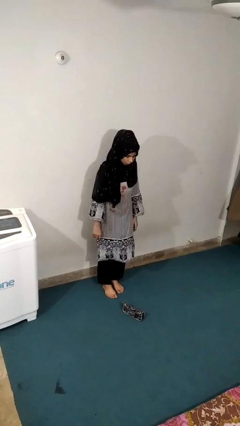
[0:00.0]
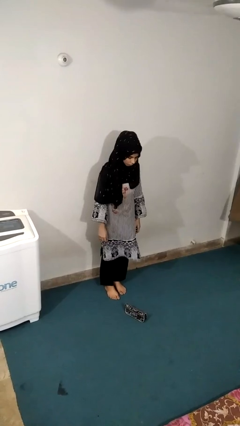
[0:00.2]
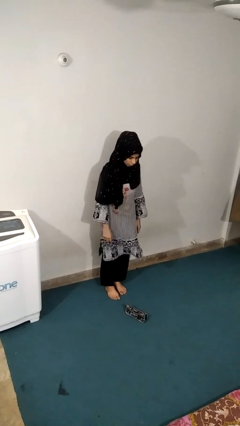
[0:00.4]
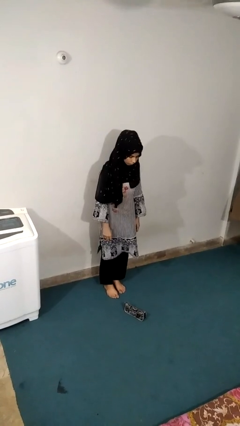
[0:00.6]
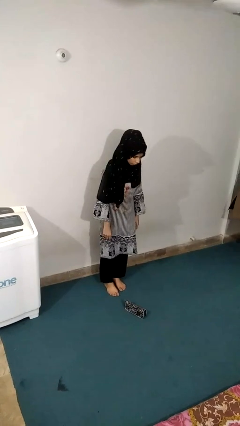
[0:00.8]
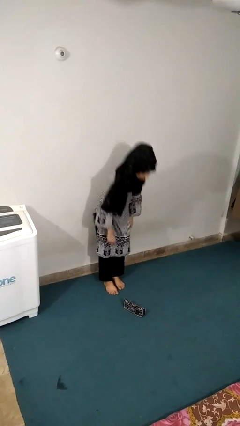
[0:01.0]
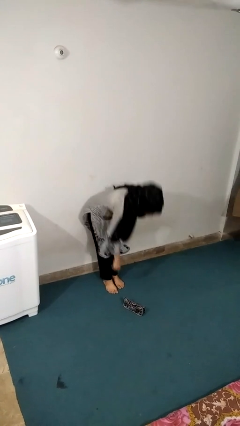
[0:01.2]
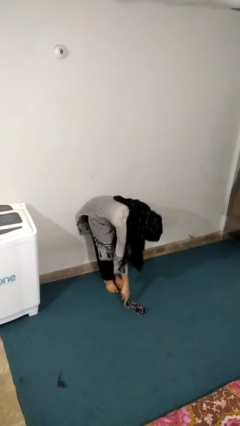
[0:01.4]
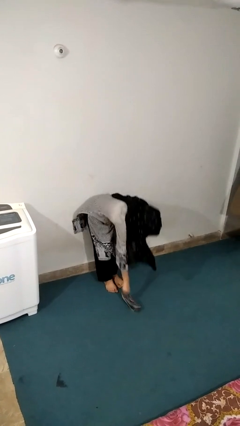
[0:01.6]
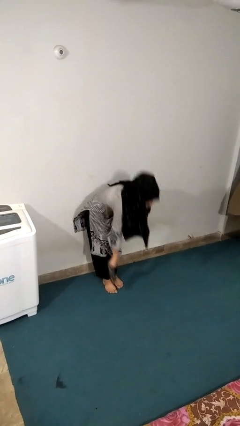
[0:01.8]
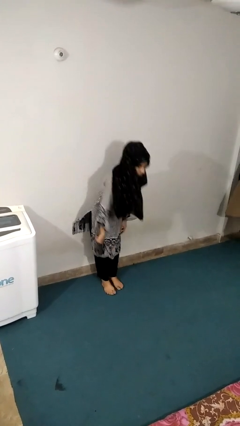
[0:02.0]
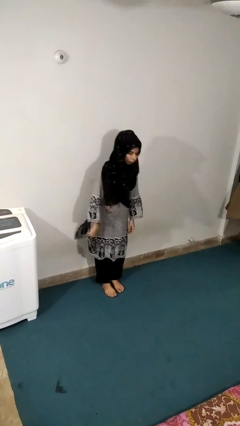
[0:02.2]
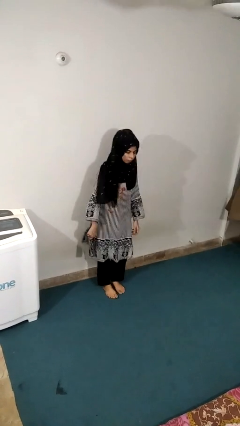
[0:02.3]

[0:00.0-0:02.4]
person picks up object from floor

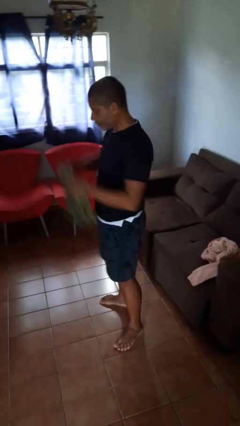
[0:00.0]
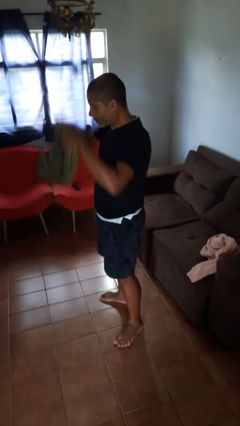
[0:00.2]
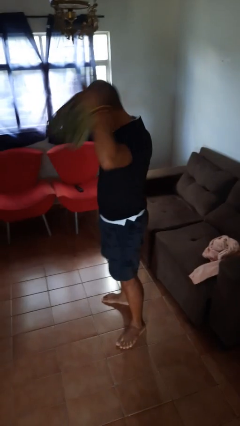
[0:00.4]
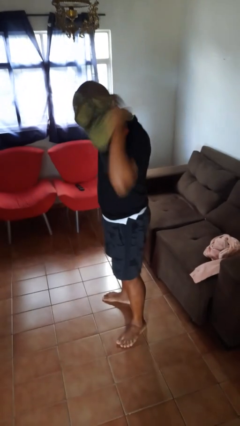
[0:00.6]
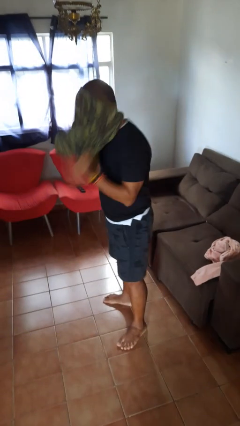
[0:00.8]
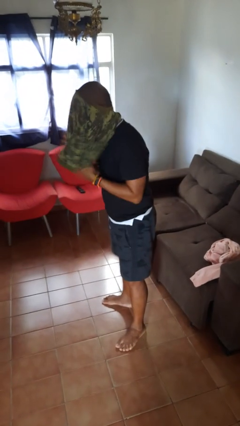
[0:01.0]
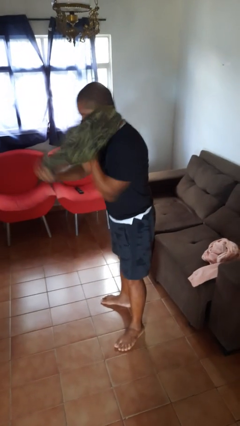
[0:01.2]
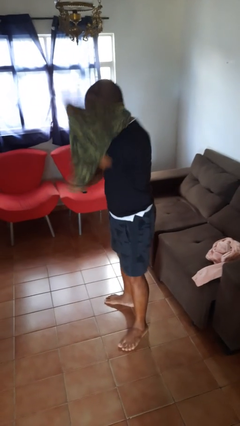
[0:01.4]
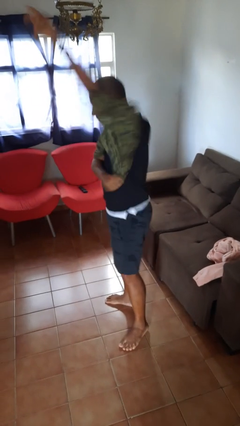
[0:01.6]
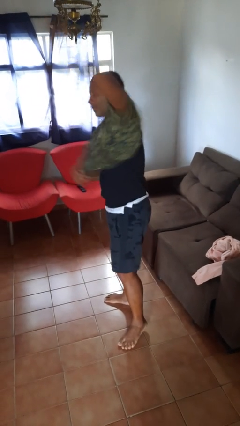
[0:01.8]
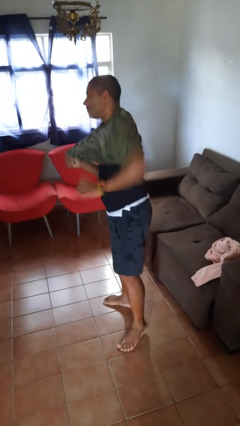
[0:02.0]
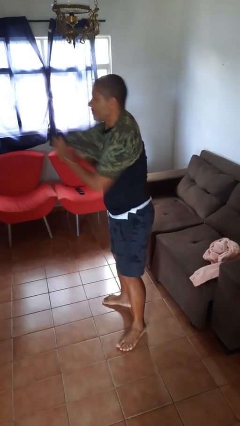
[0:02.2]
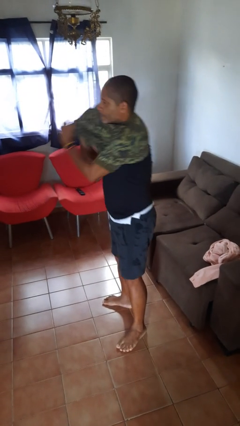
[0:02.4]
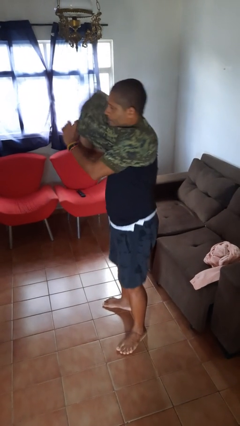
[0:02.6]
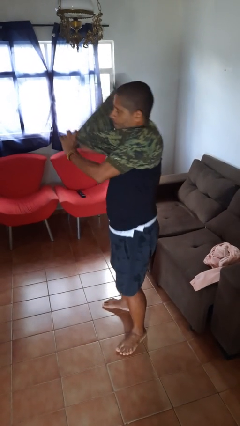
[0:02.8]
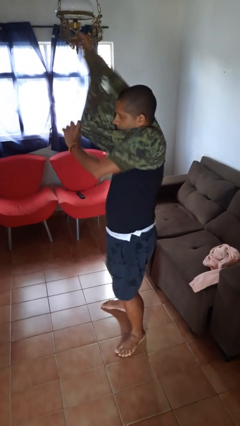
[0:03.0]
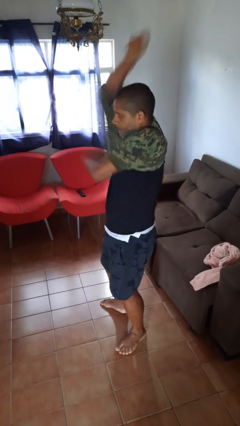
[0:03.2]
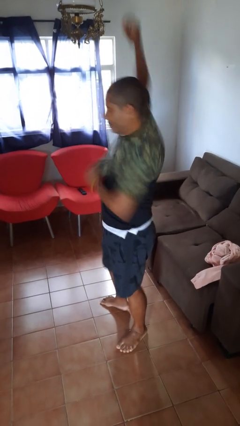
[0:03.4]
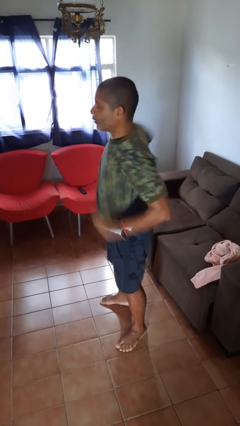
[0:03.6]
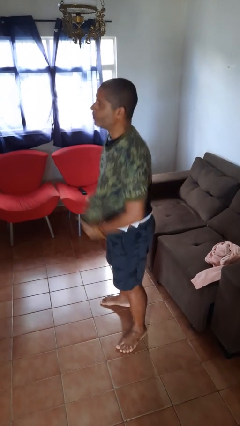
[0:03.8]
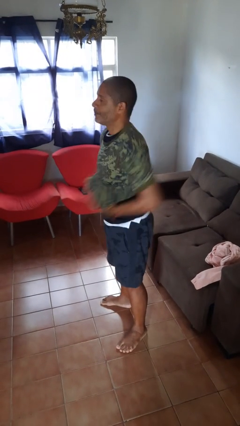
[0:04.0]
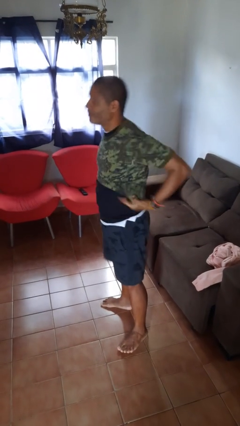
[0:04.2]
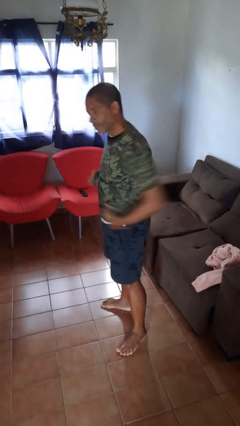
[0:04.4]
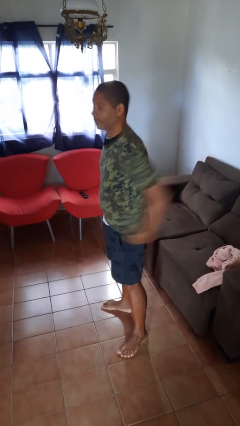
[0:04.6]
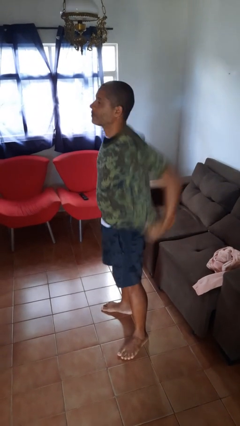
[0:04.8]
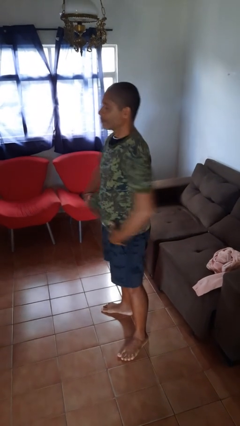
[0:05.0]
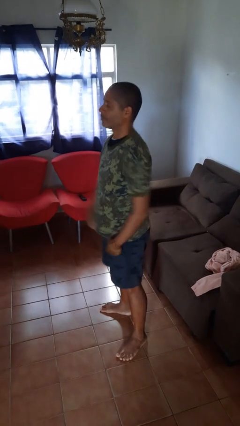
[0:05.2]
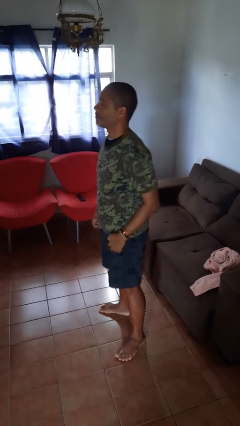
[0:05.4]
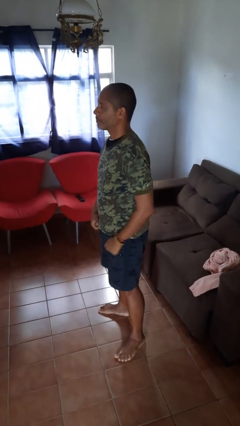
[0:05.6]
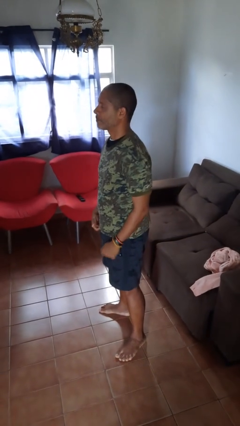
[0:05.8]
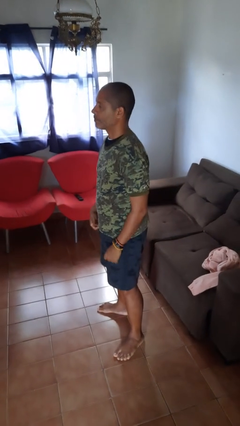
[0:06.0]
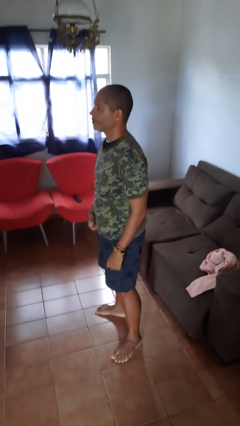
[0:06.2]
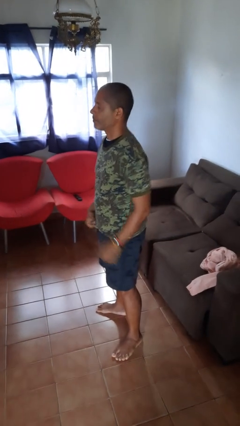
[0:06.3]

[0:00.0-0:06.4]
person puts on shirt

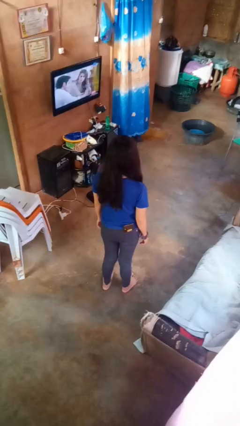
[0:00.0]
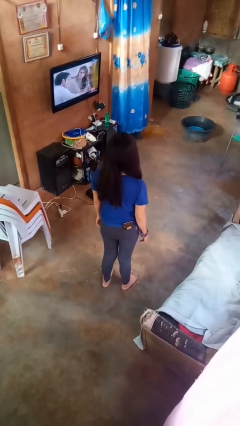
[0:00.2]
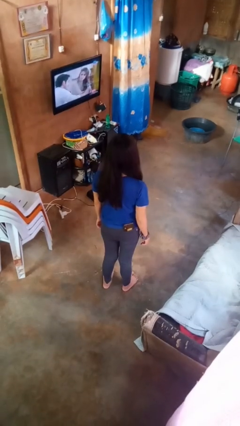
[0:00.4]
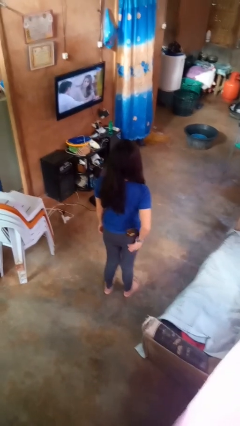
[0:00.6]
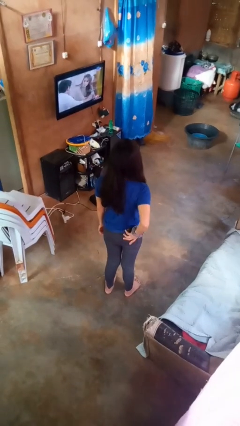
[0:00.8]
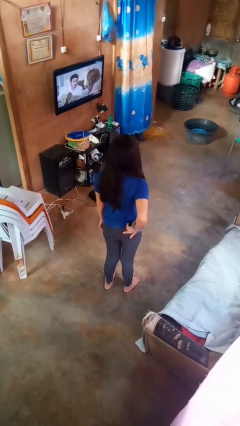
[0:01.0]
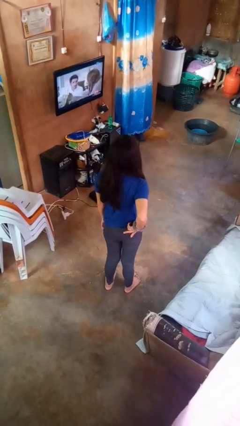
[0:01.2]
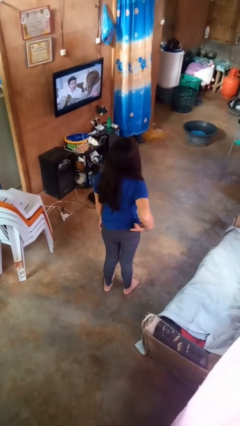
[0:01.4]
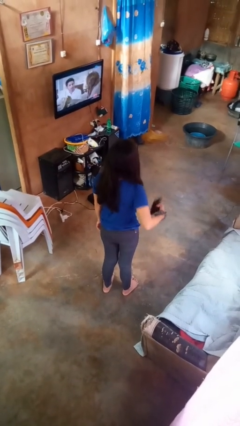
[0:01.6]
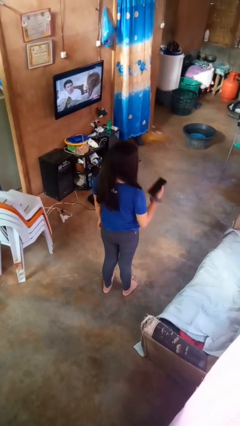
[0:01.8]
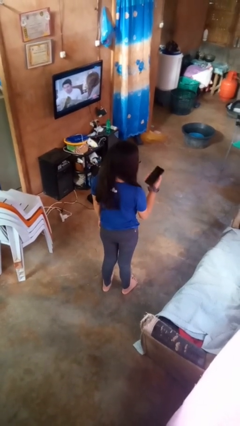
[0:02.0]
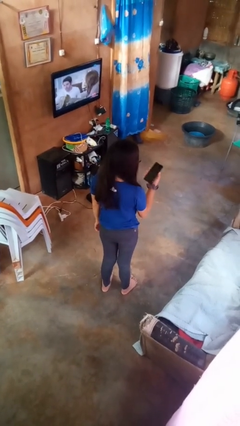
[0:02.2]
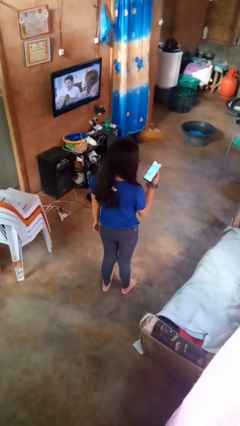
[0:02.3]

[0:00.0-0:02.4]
person takes phone from pocket

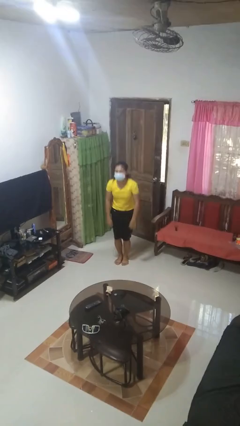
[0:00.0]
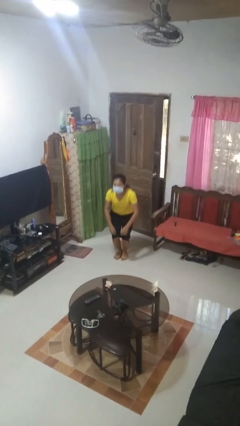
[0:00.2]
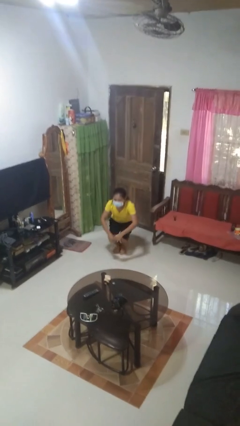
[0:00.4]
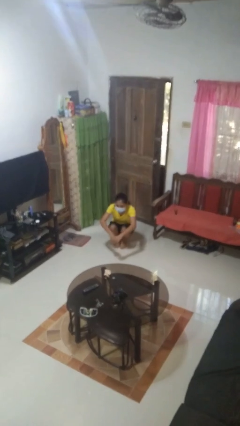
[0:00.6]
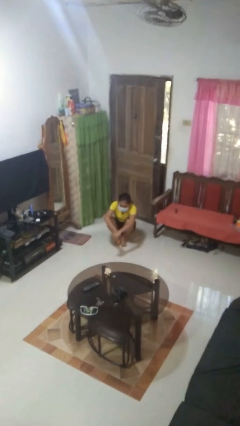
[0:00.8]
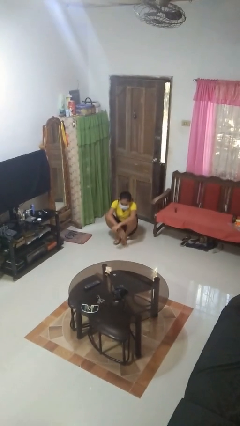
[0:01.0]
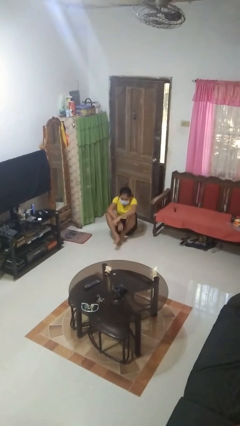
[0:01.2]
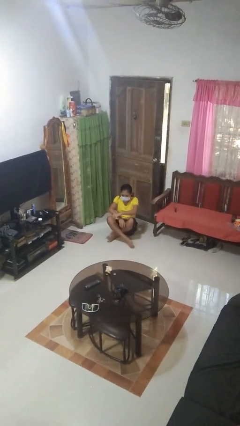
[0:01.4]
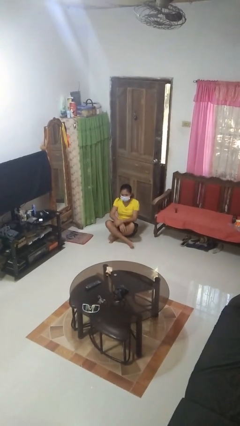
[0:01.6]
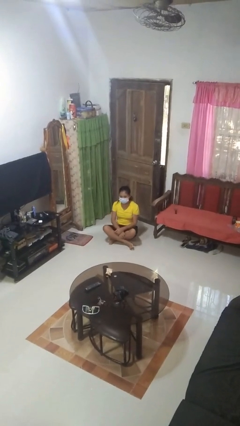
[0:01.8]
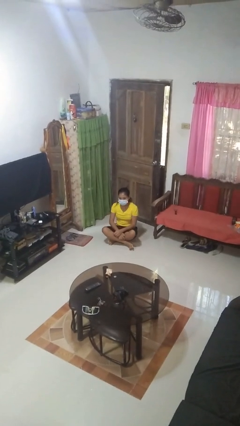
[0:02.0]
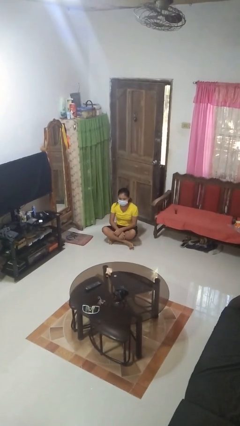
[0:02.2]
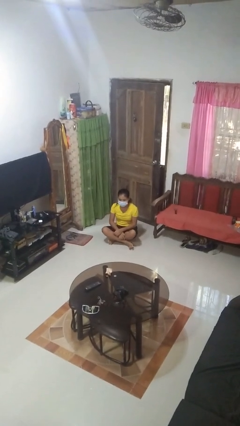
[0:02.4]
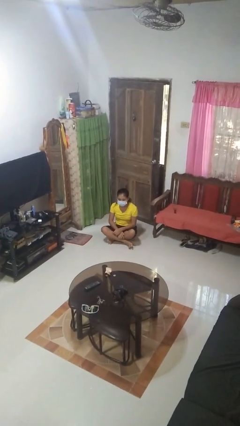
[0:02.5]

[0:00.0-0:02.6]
person sits crisscross

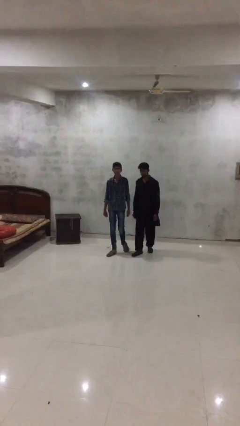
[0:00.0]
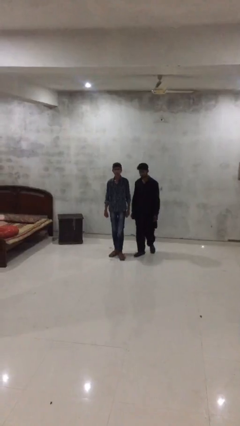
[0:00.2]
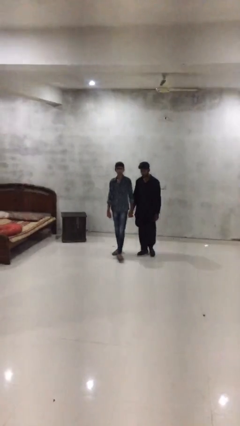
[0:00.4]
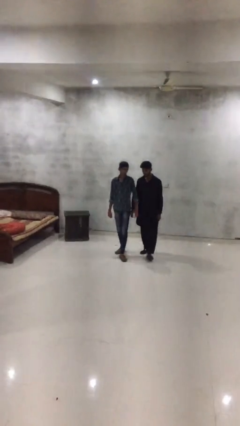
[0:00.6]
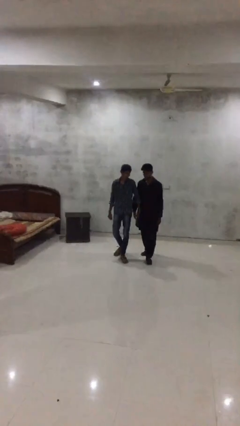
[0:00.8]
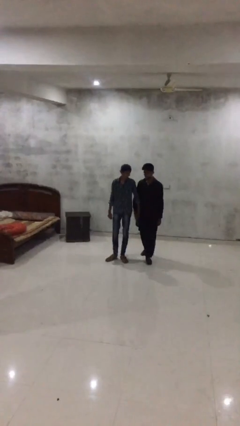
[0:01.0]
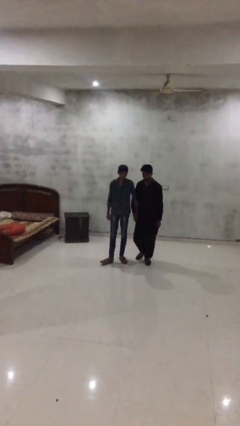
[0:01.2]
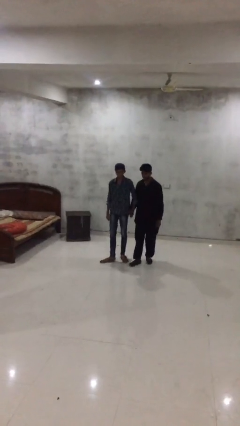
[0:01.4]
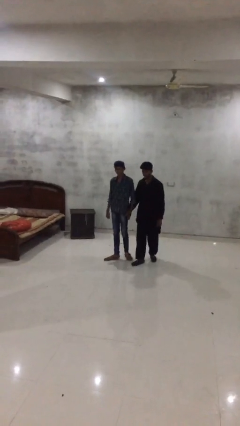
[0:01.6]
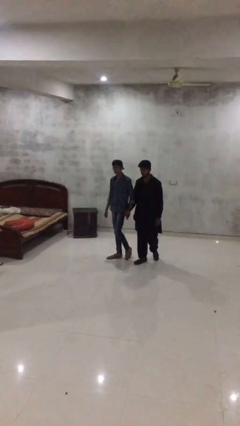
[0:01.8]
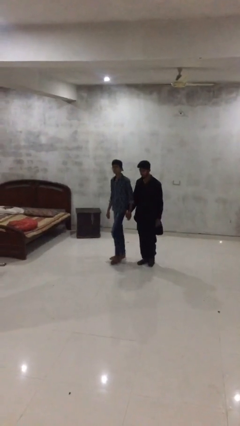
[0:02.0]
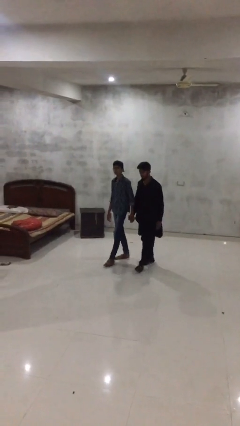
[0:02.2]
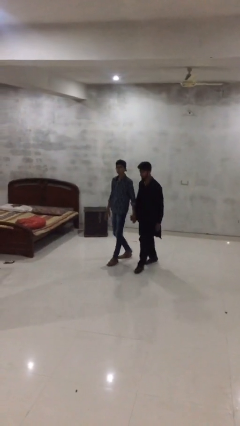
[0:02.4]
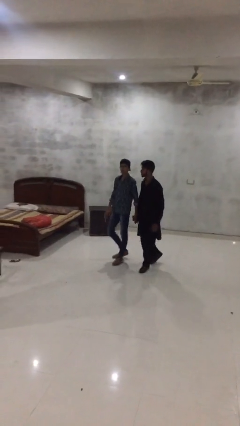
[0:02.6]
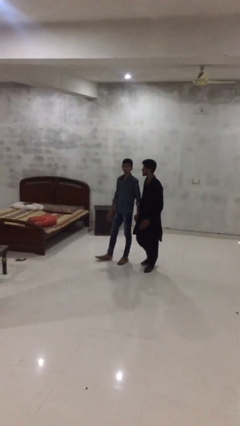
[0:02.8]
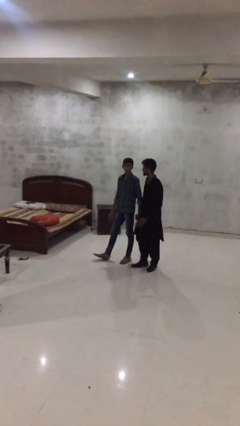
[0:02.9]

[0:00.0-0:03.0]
person holds hand

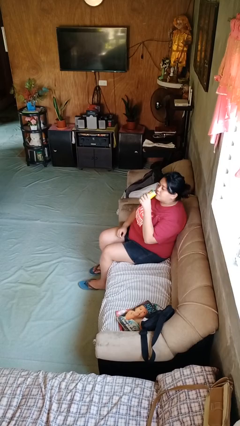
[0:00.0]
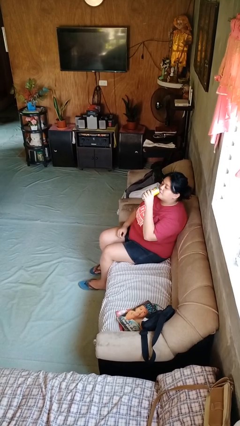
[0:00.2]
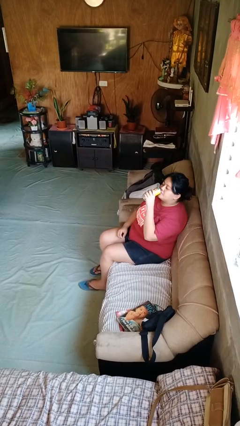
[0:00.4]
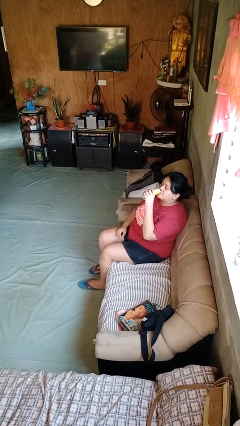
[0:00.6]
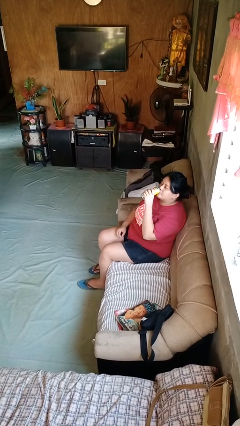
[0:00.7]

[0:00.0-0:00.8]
person drinks from beverage can
